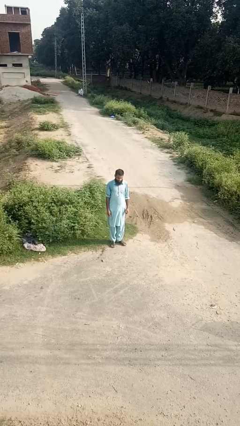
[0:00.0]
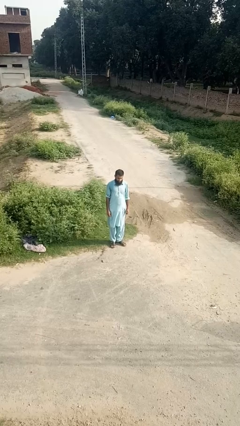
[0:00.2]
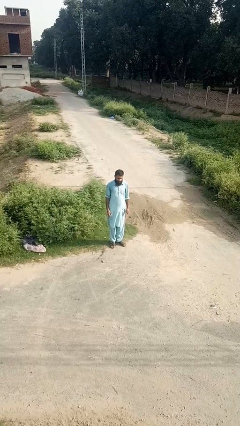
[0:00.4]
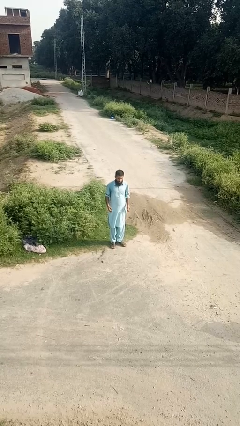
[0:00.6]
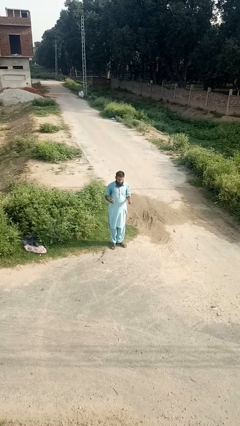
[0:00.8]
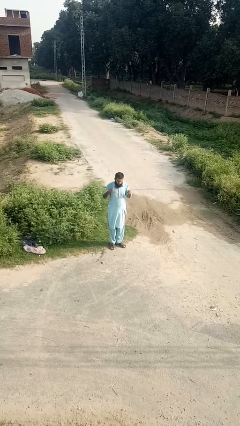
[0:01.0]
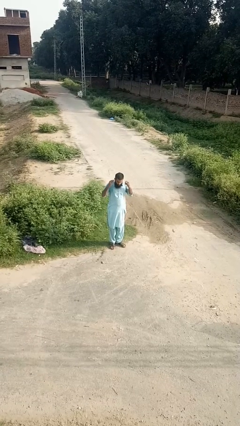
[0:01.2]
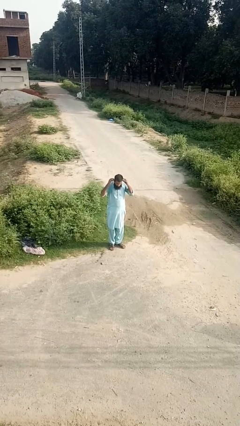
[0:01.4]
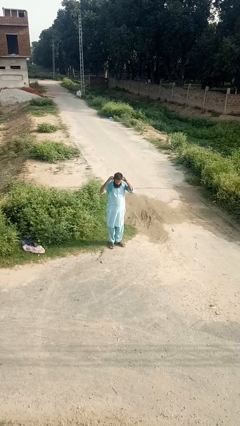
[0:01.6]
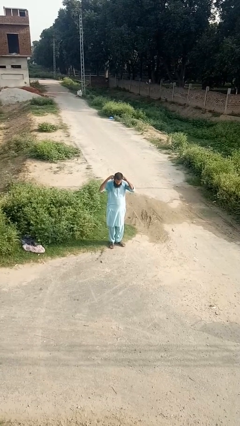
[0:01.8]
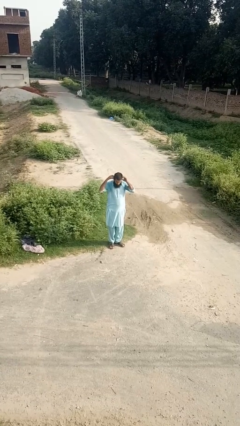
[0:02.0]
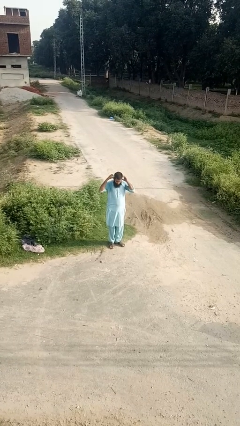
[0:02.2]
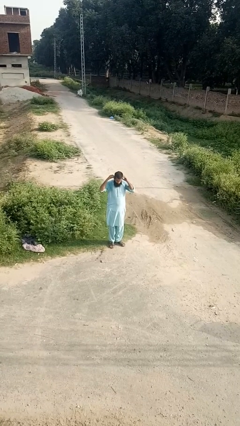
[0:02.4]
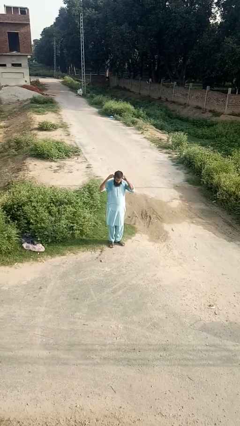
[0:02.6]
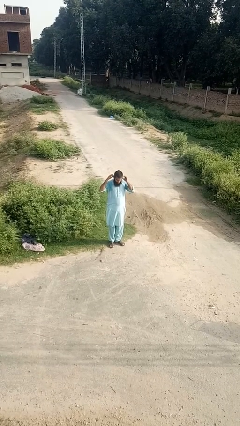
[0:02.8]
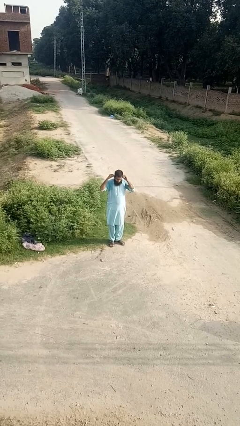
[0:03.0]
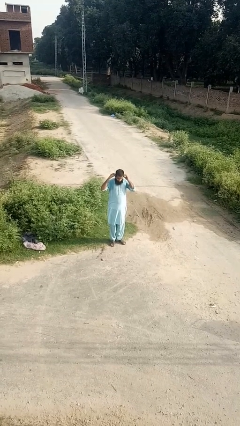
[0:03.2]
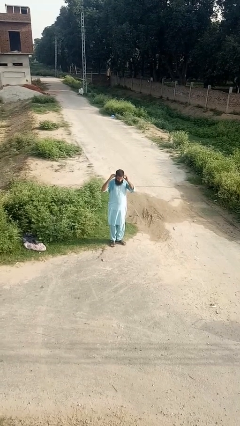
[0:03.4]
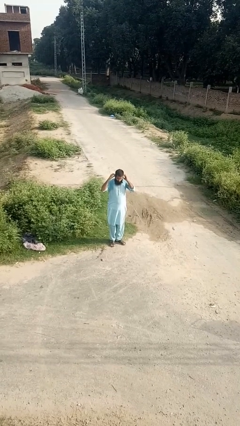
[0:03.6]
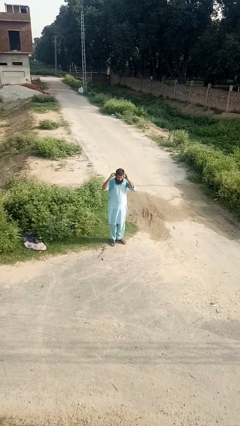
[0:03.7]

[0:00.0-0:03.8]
person puts on earrings

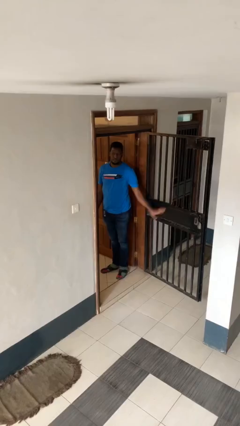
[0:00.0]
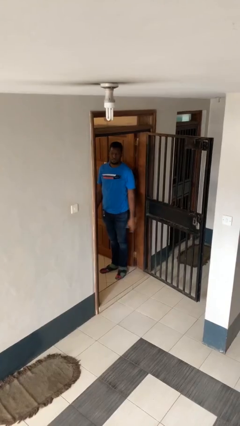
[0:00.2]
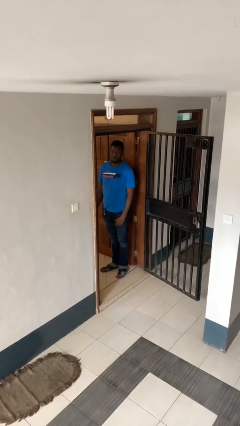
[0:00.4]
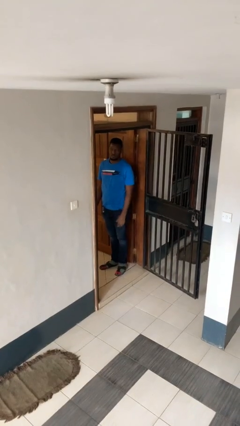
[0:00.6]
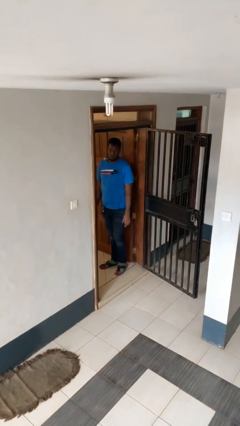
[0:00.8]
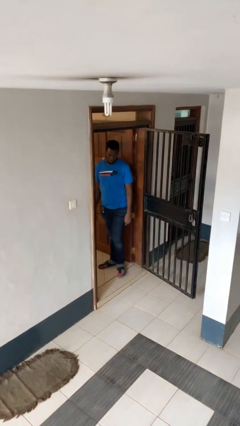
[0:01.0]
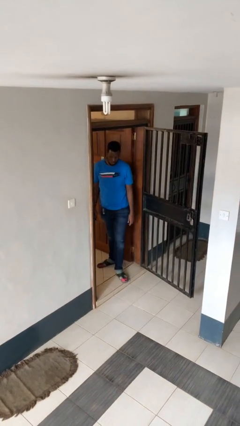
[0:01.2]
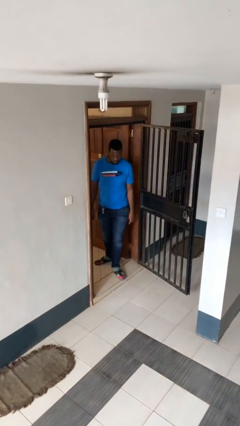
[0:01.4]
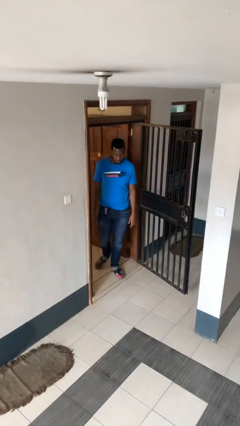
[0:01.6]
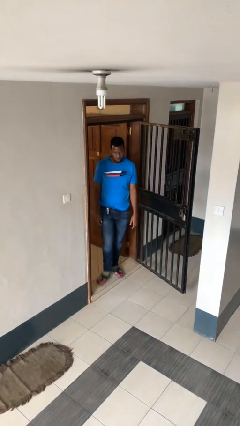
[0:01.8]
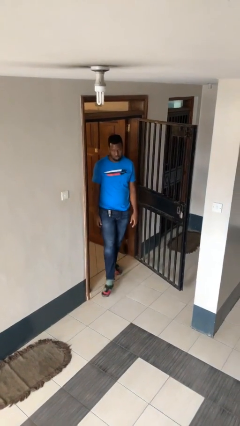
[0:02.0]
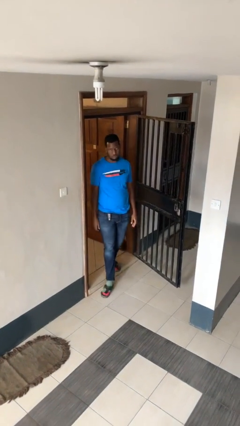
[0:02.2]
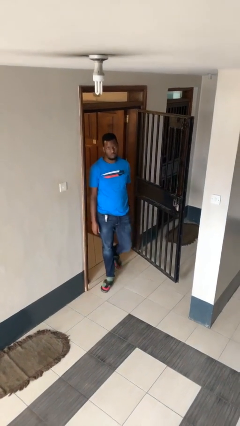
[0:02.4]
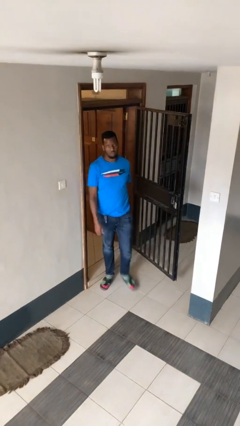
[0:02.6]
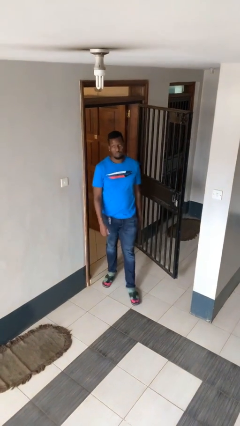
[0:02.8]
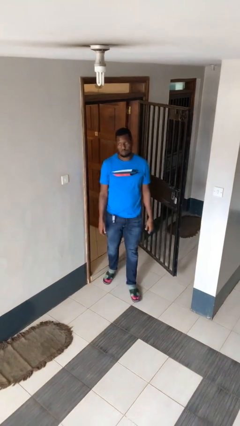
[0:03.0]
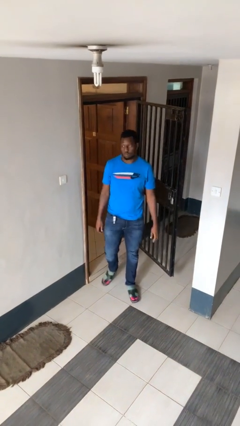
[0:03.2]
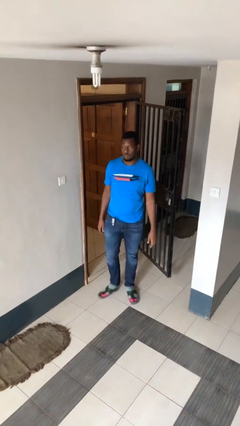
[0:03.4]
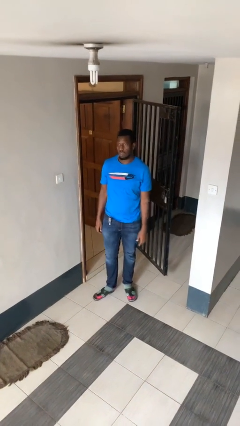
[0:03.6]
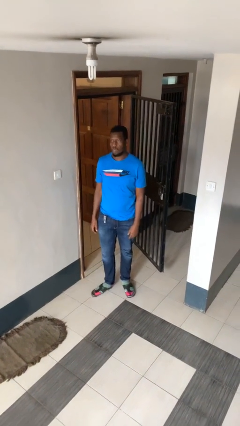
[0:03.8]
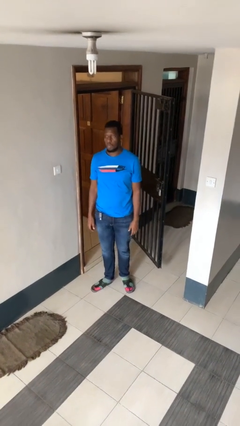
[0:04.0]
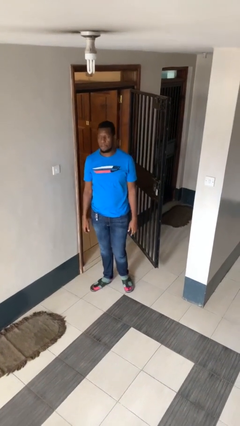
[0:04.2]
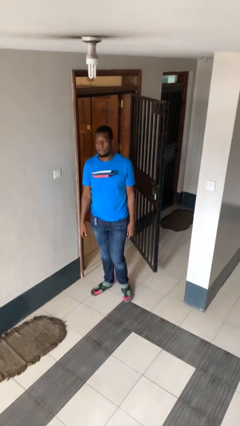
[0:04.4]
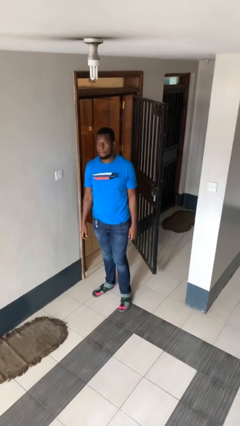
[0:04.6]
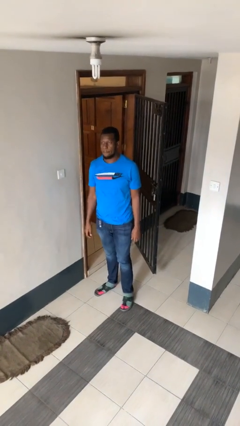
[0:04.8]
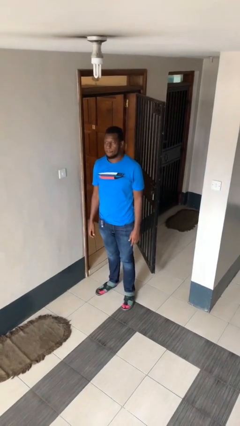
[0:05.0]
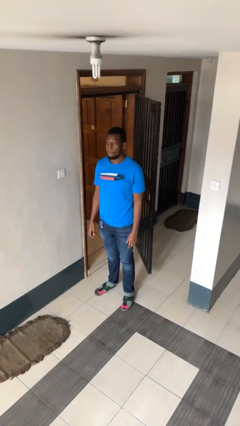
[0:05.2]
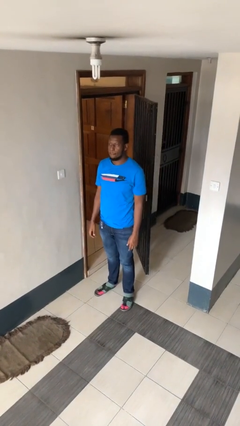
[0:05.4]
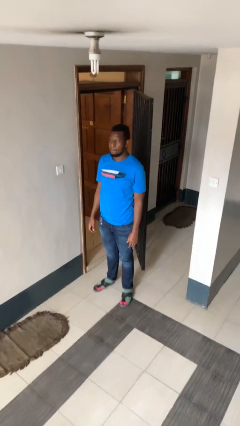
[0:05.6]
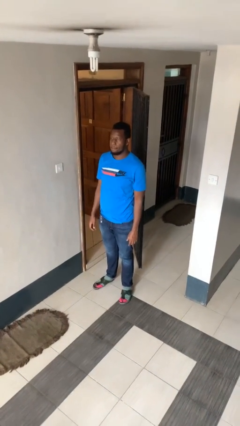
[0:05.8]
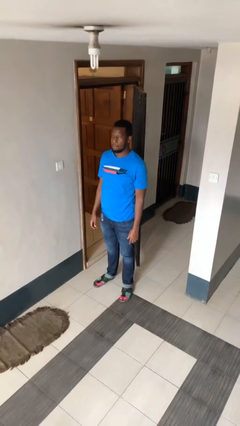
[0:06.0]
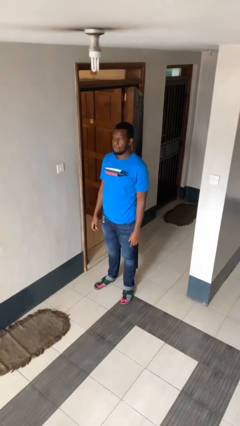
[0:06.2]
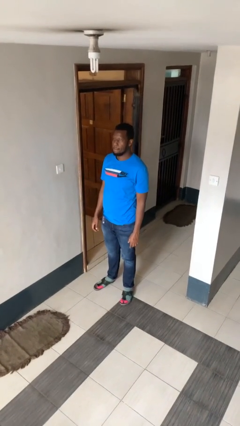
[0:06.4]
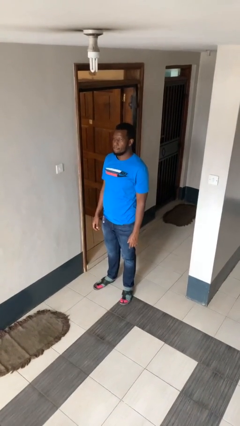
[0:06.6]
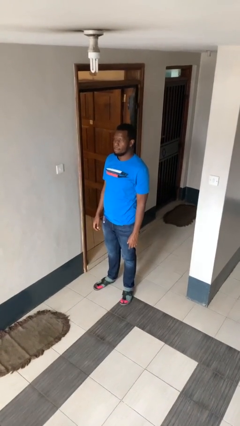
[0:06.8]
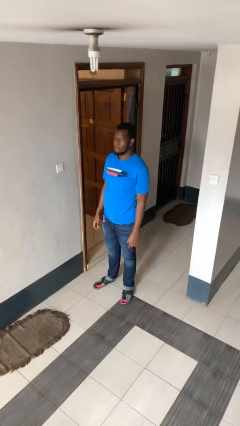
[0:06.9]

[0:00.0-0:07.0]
person enters scene through structure

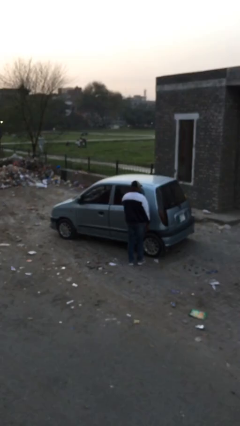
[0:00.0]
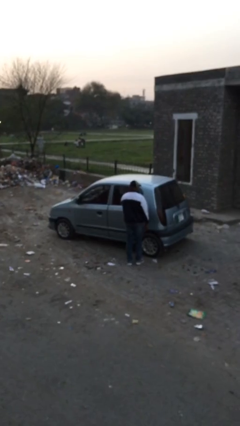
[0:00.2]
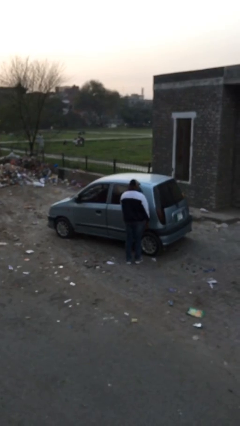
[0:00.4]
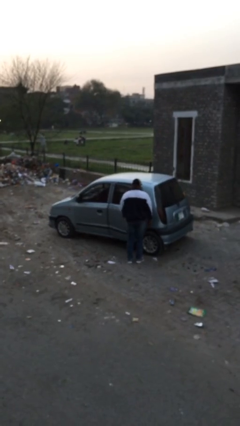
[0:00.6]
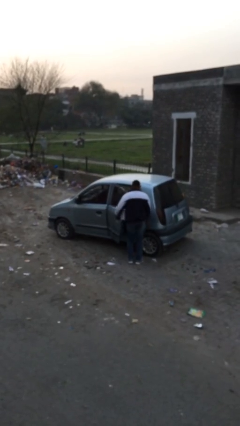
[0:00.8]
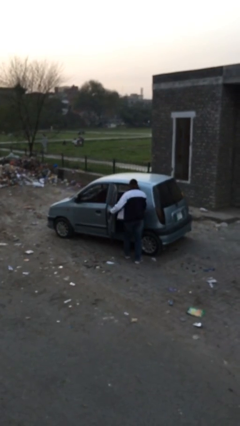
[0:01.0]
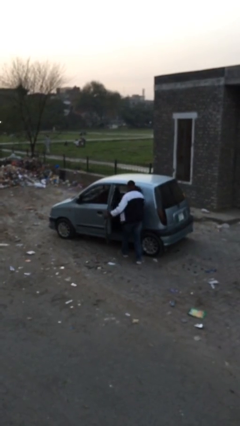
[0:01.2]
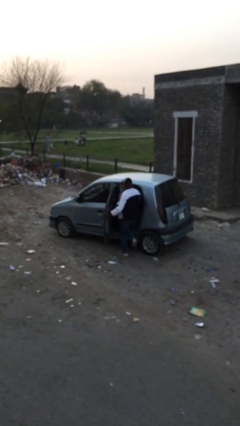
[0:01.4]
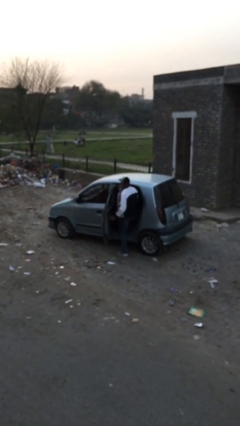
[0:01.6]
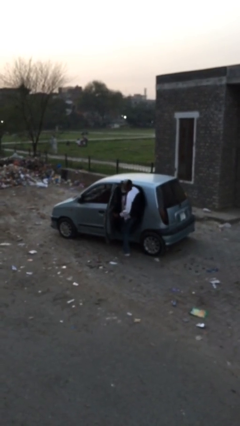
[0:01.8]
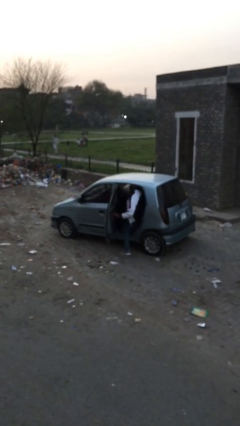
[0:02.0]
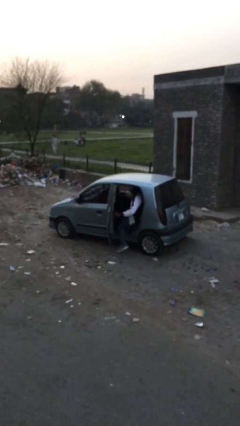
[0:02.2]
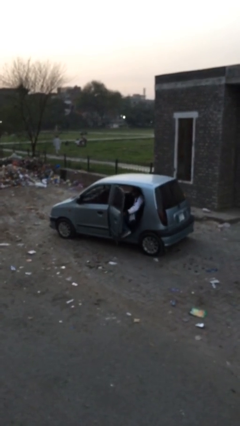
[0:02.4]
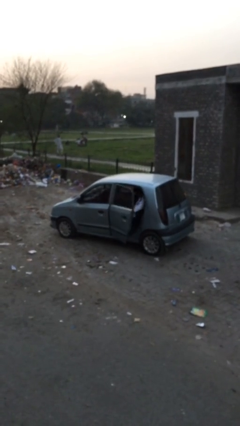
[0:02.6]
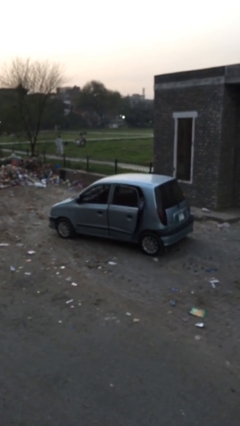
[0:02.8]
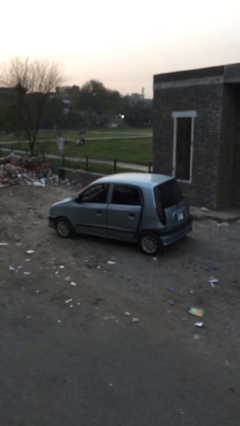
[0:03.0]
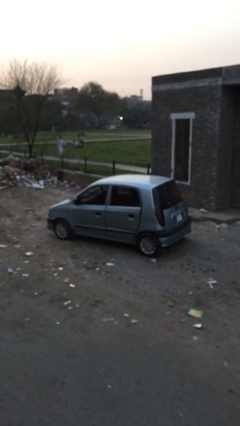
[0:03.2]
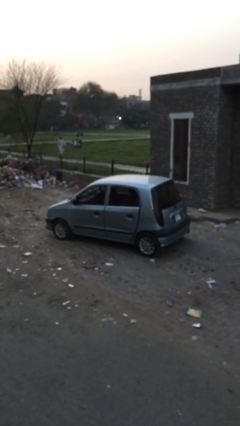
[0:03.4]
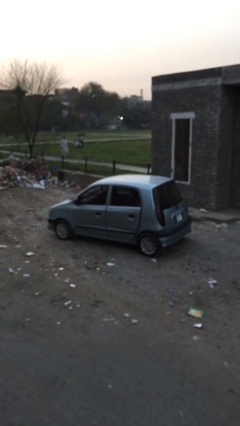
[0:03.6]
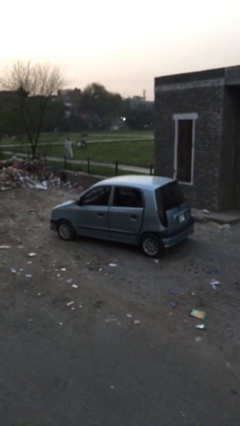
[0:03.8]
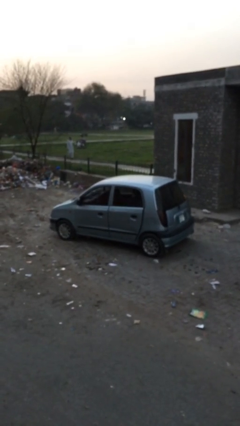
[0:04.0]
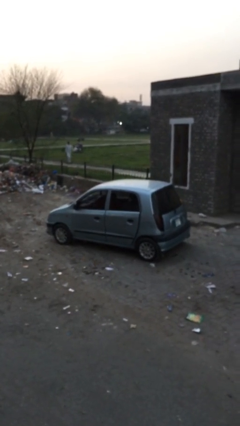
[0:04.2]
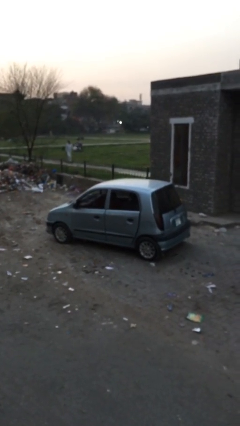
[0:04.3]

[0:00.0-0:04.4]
car picks up person

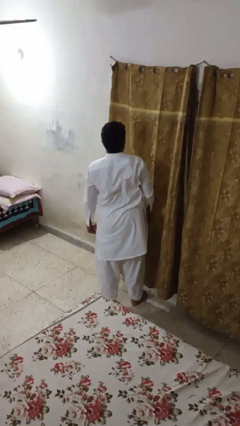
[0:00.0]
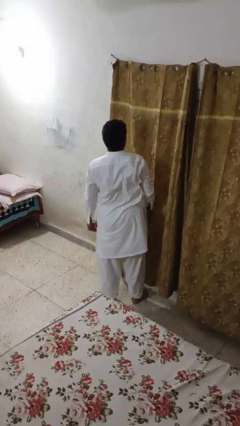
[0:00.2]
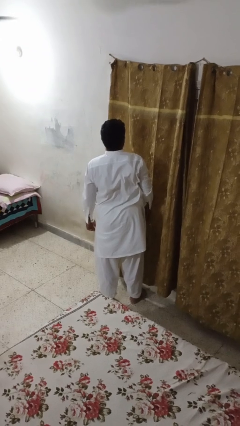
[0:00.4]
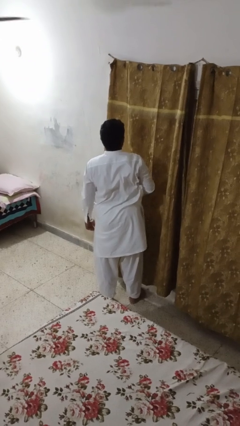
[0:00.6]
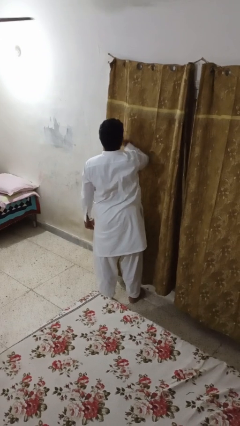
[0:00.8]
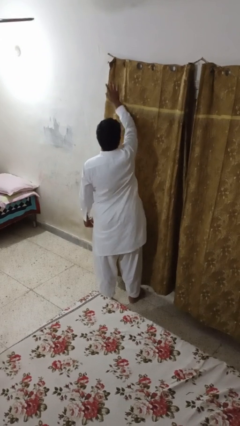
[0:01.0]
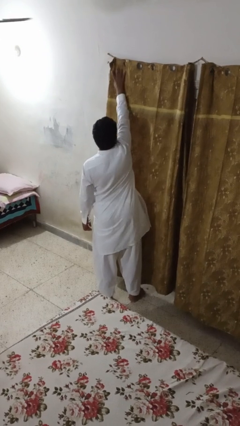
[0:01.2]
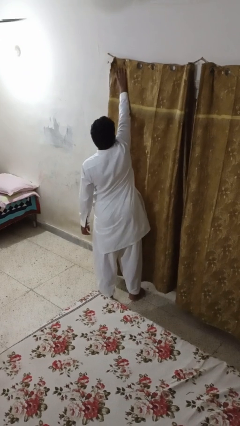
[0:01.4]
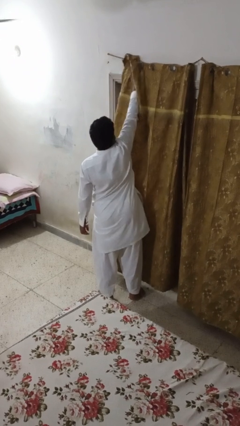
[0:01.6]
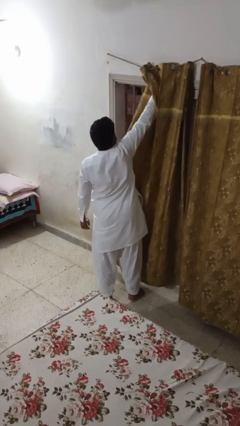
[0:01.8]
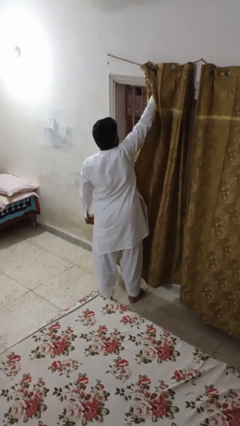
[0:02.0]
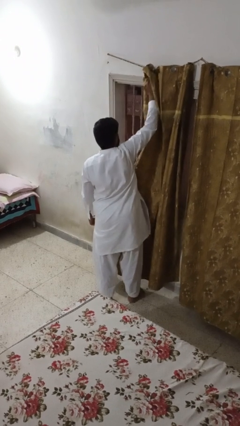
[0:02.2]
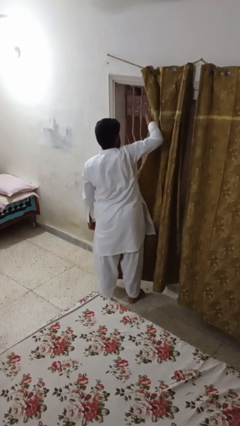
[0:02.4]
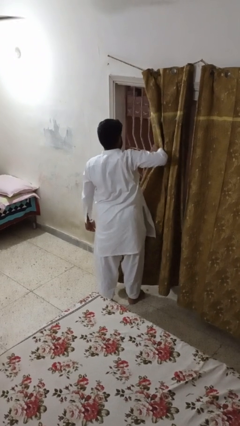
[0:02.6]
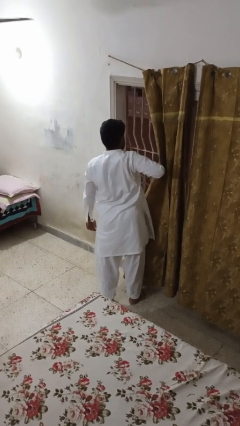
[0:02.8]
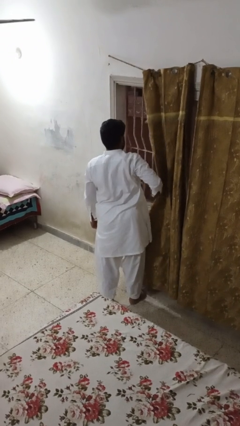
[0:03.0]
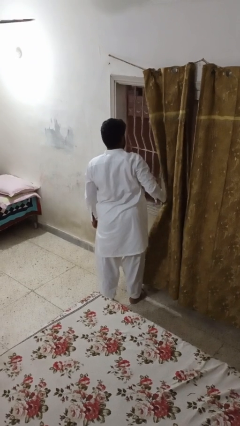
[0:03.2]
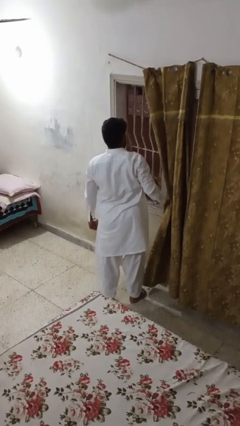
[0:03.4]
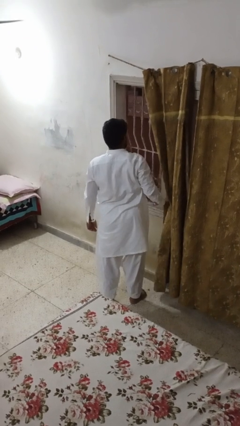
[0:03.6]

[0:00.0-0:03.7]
person opens curtains
